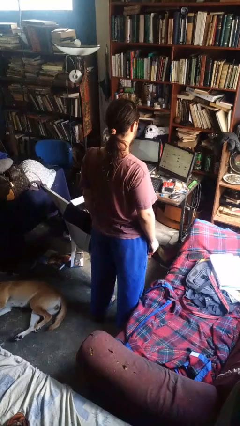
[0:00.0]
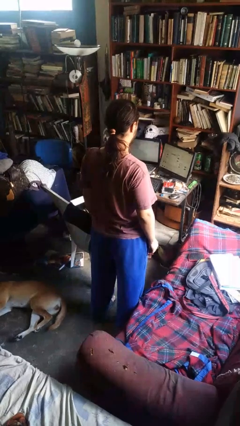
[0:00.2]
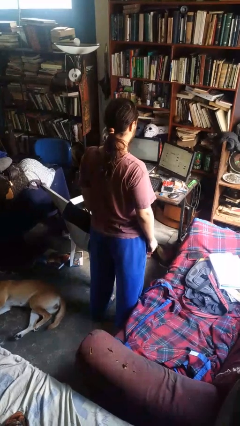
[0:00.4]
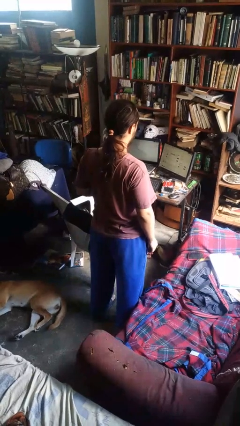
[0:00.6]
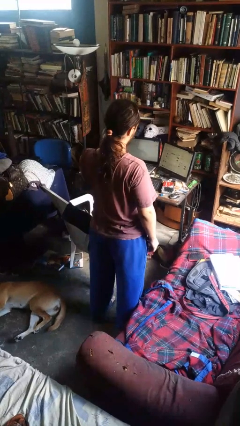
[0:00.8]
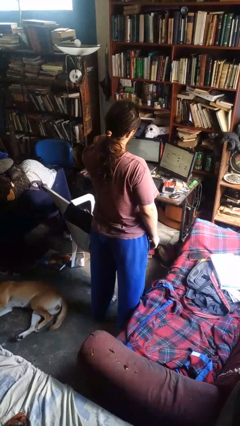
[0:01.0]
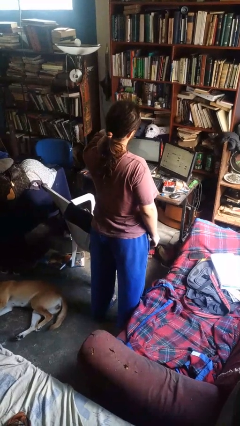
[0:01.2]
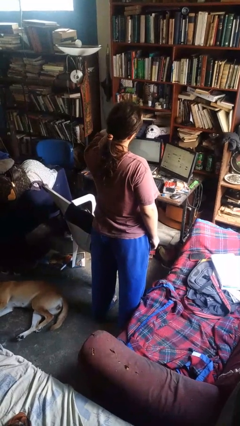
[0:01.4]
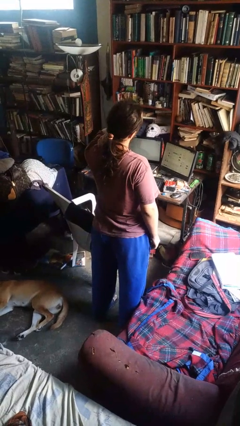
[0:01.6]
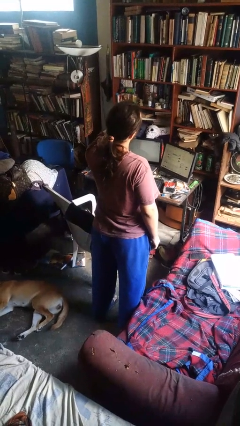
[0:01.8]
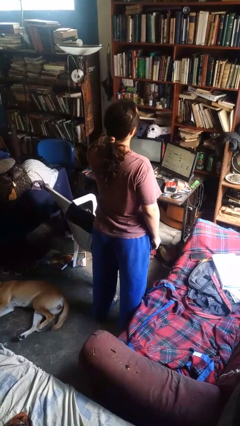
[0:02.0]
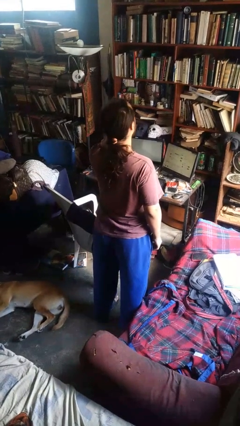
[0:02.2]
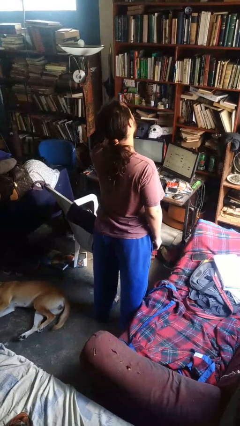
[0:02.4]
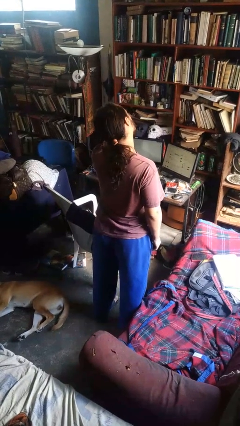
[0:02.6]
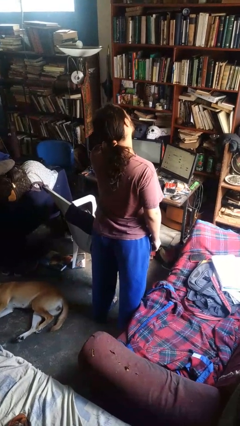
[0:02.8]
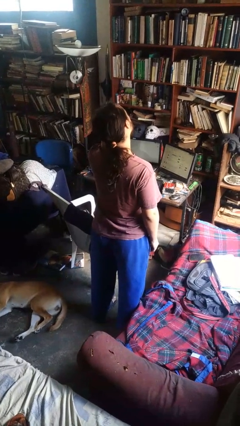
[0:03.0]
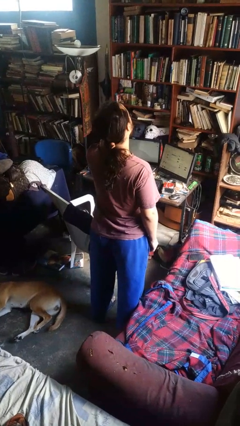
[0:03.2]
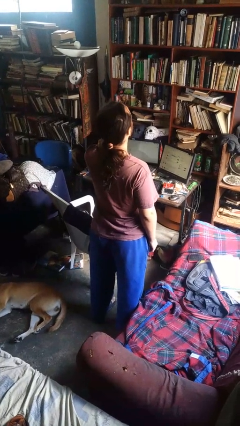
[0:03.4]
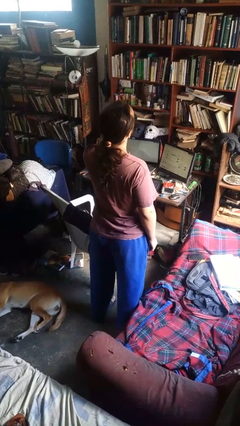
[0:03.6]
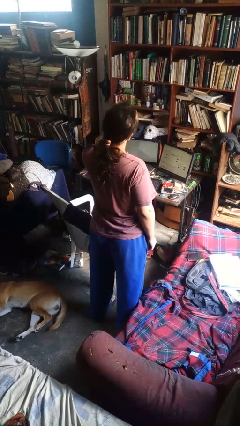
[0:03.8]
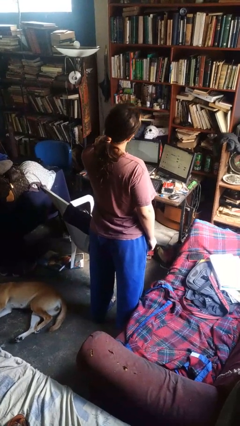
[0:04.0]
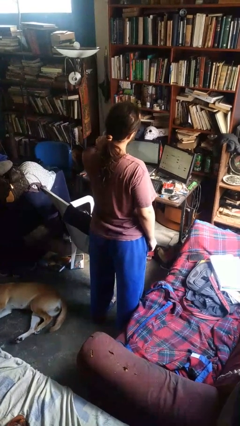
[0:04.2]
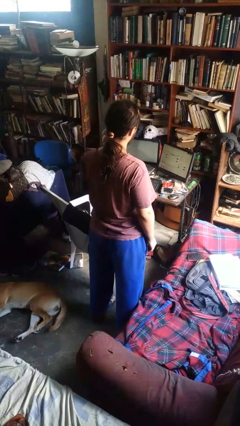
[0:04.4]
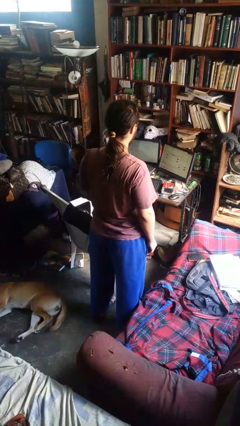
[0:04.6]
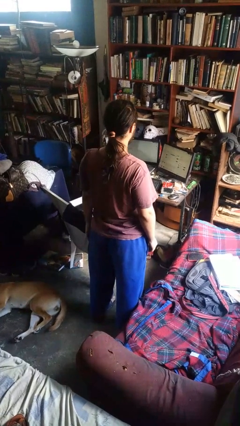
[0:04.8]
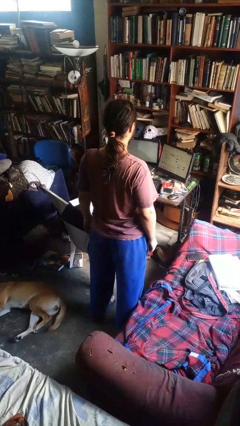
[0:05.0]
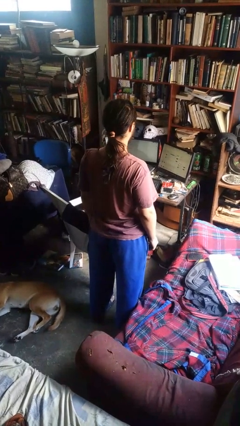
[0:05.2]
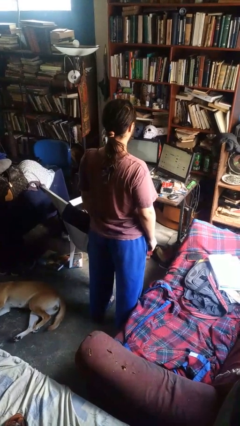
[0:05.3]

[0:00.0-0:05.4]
person rubs neck

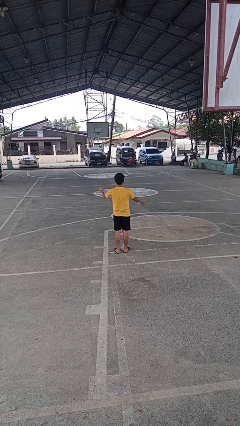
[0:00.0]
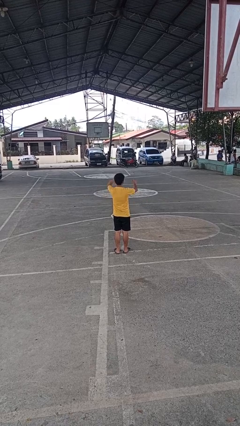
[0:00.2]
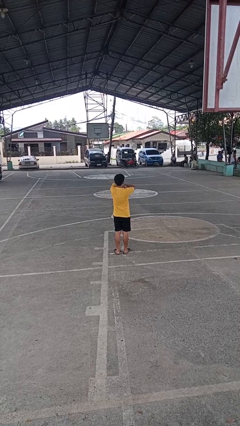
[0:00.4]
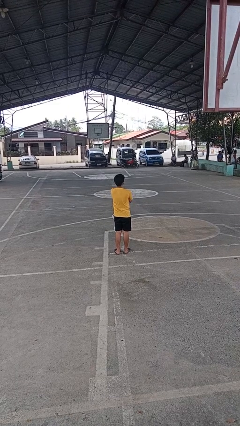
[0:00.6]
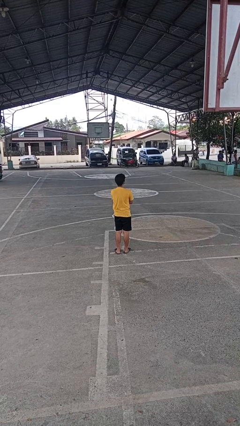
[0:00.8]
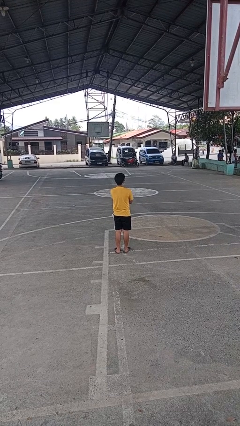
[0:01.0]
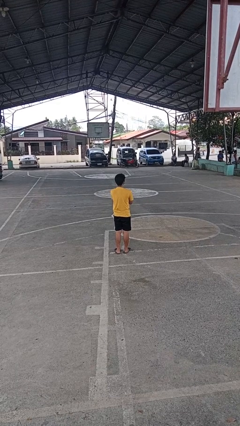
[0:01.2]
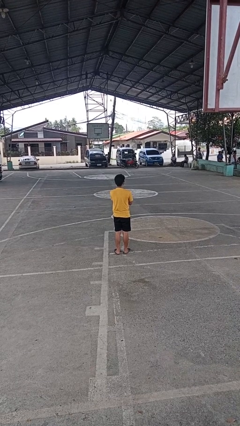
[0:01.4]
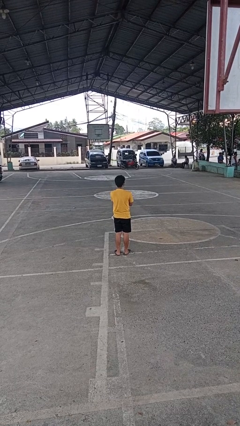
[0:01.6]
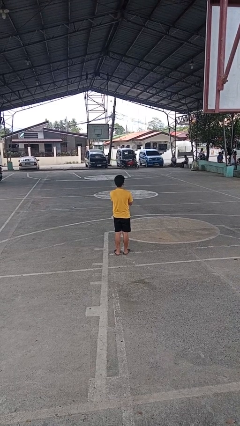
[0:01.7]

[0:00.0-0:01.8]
person crosses arms

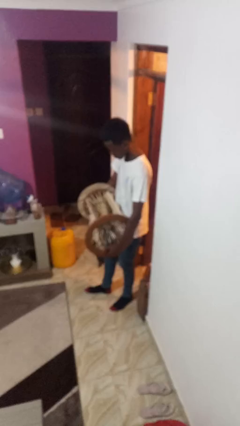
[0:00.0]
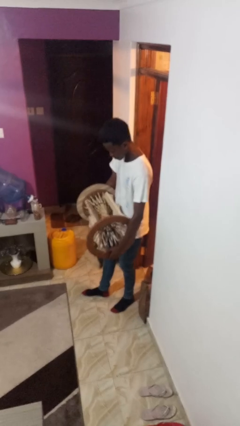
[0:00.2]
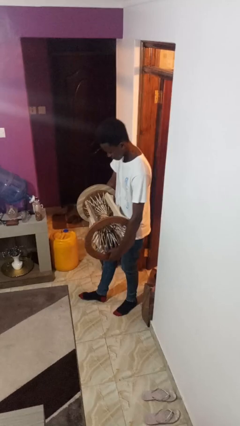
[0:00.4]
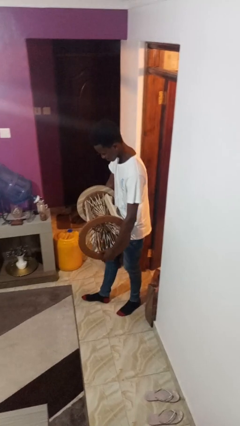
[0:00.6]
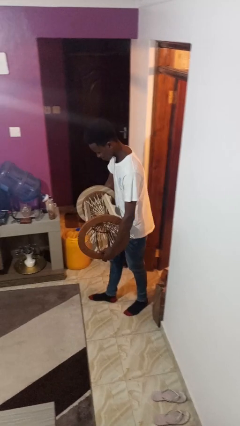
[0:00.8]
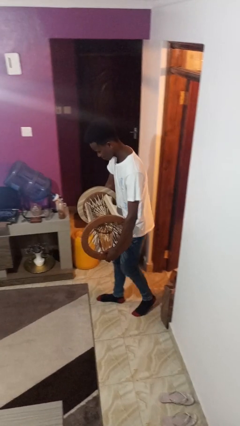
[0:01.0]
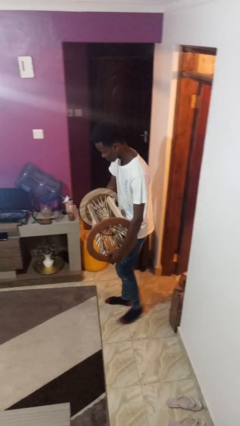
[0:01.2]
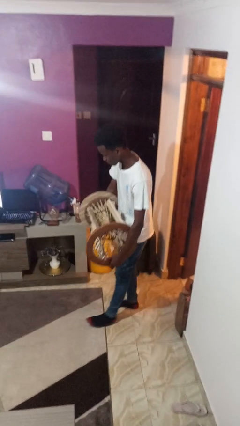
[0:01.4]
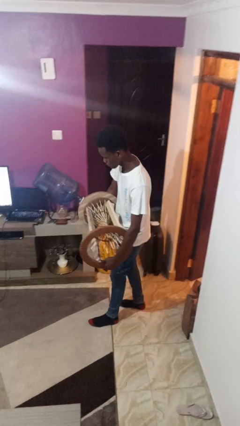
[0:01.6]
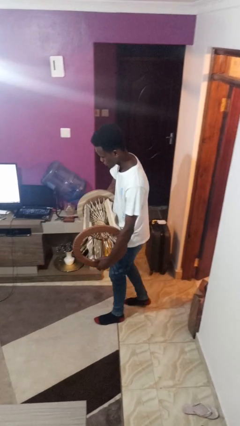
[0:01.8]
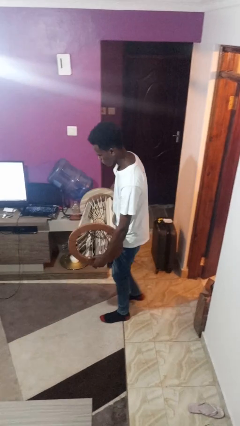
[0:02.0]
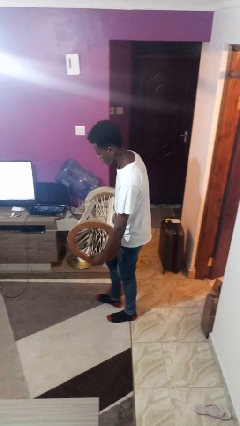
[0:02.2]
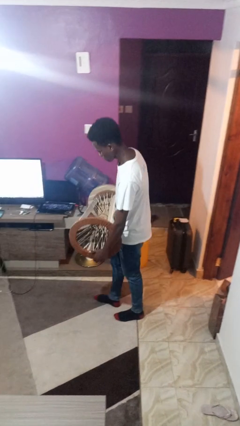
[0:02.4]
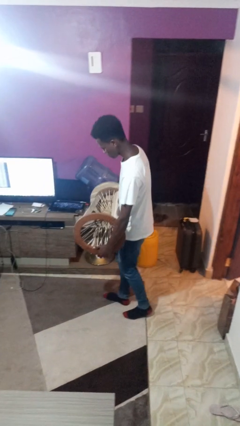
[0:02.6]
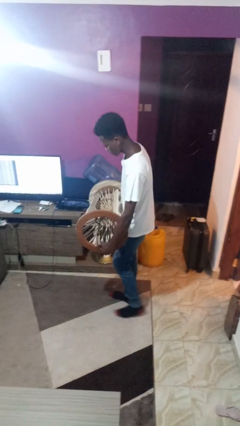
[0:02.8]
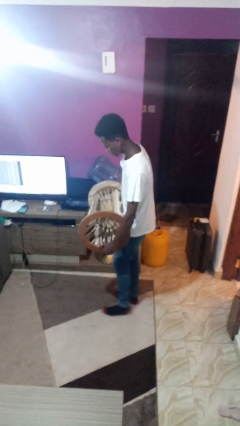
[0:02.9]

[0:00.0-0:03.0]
person carries furniture

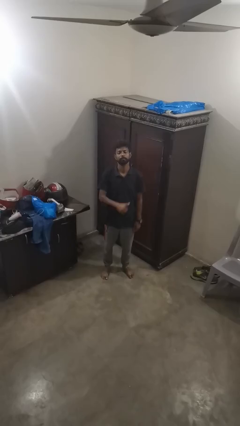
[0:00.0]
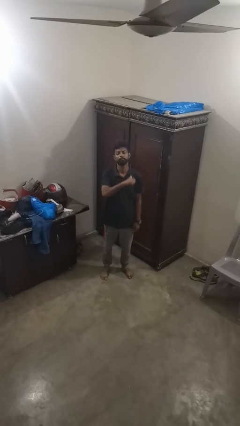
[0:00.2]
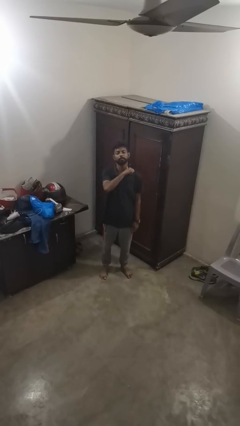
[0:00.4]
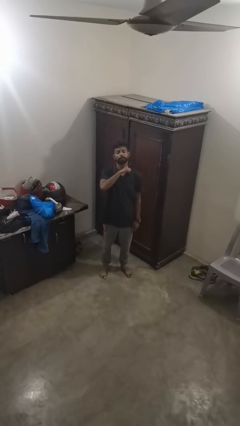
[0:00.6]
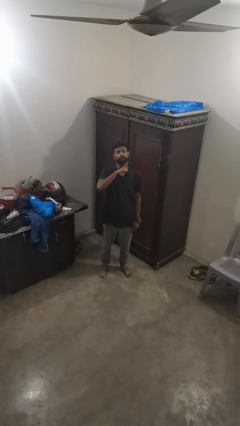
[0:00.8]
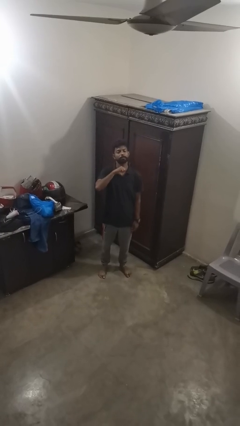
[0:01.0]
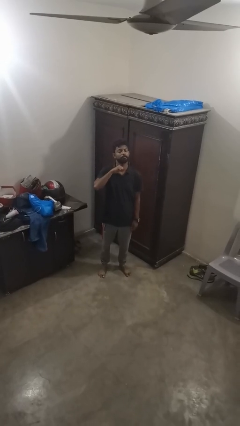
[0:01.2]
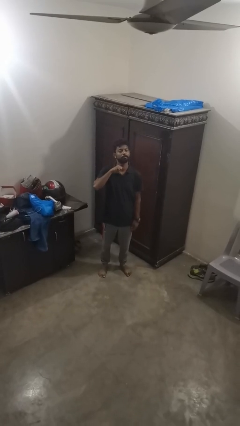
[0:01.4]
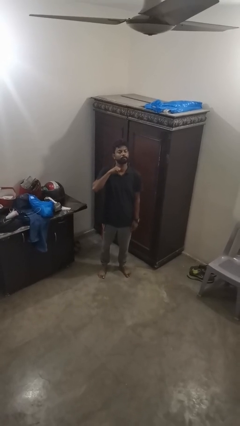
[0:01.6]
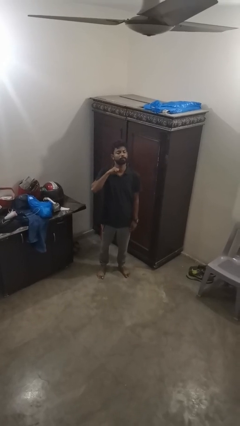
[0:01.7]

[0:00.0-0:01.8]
person gestures cut

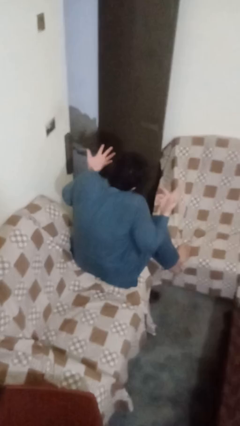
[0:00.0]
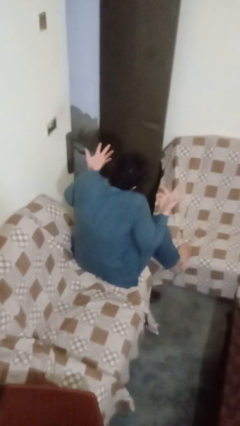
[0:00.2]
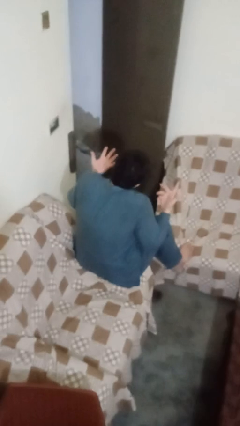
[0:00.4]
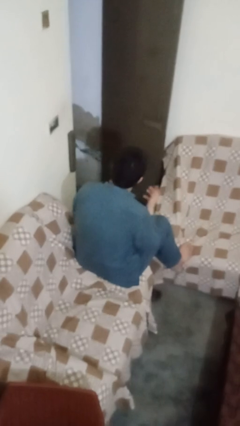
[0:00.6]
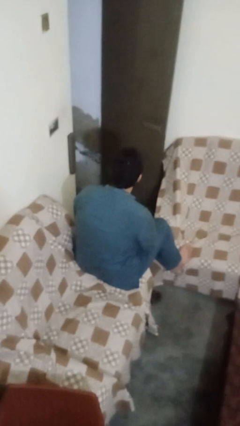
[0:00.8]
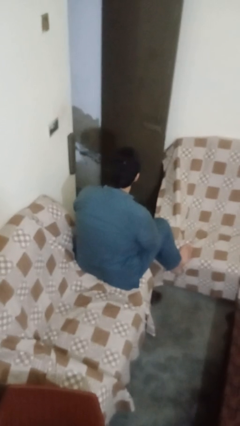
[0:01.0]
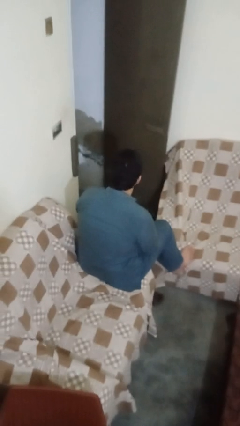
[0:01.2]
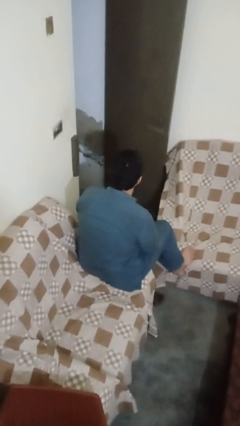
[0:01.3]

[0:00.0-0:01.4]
person shrugs

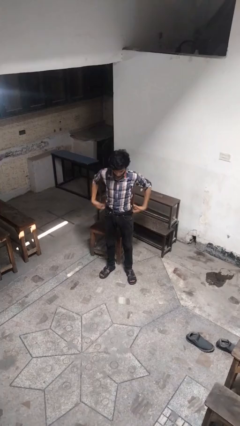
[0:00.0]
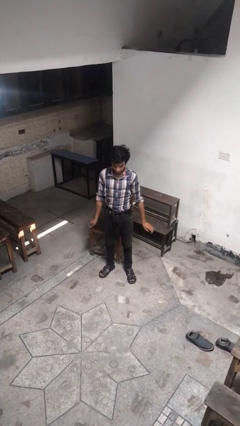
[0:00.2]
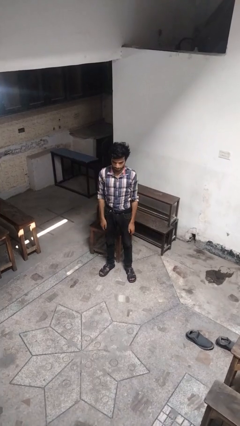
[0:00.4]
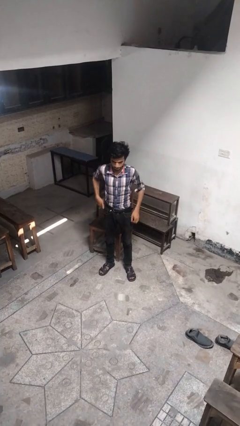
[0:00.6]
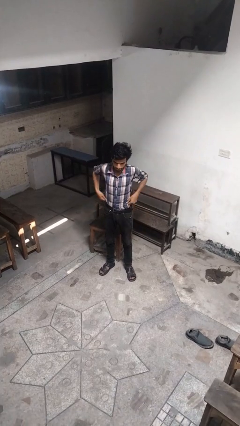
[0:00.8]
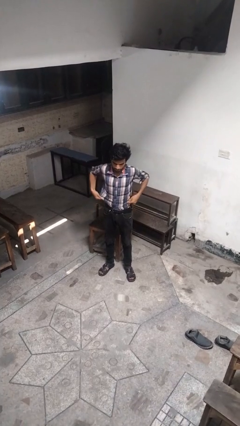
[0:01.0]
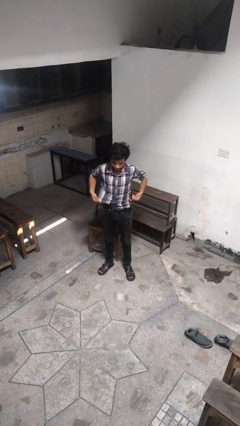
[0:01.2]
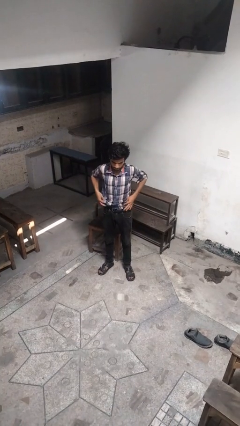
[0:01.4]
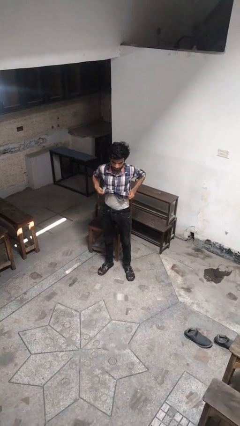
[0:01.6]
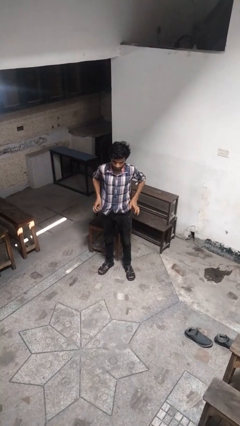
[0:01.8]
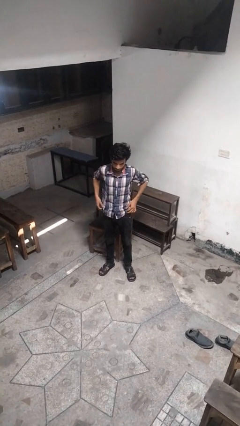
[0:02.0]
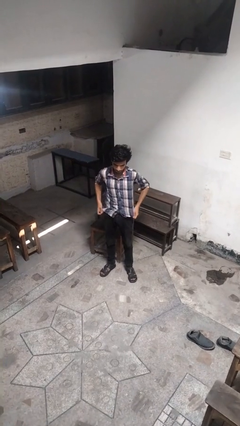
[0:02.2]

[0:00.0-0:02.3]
person untucks shirt

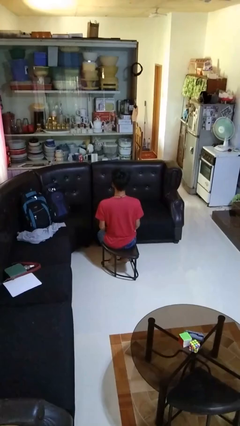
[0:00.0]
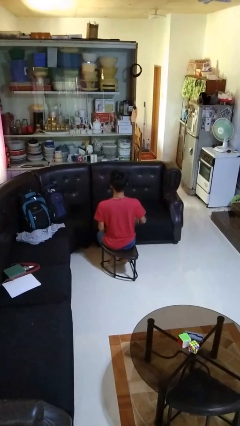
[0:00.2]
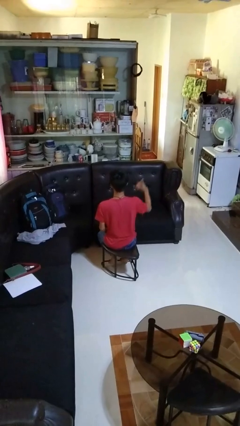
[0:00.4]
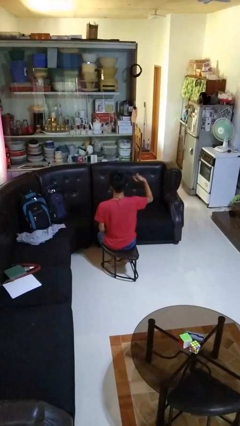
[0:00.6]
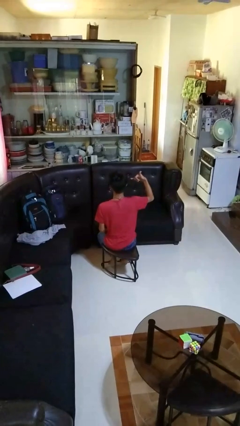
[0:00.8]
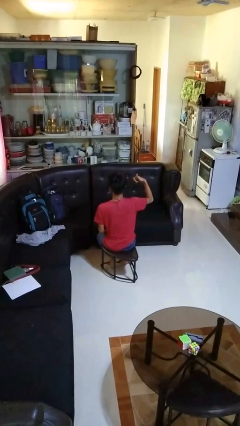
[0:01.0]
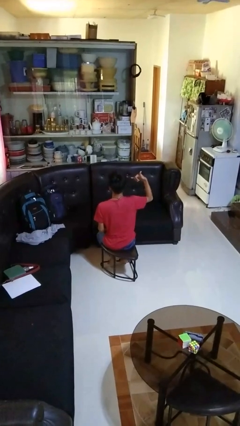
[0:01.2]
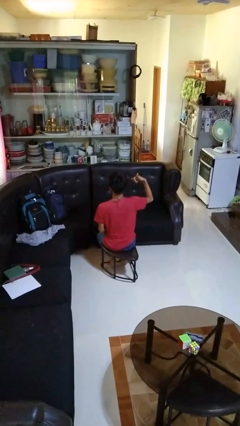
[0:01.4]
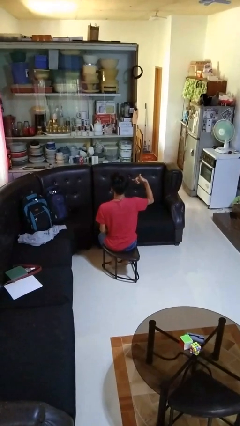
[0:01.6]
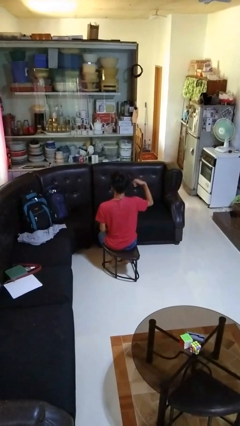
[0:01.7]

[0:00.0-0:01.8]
person gestures hang loose
